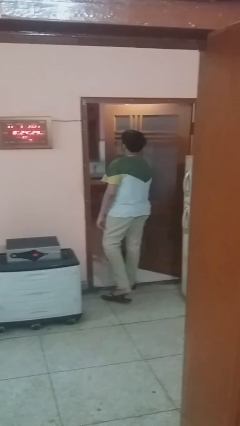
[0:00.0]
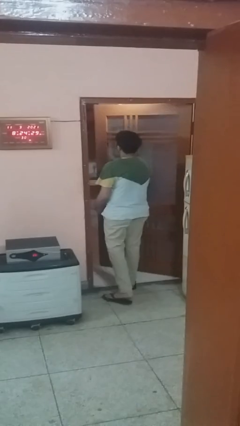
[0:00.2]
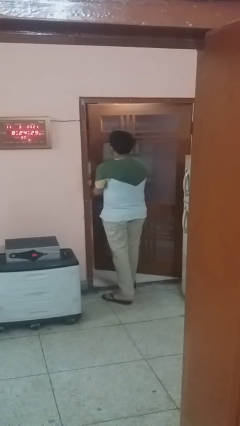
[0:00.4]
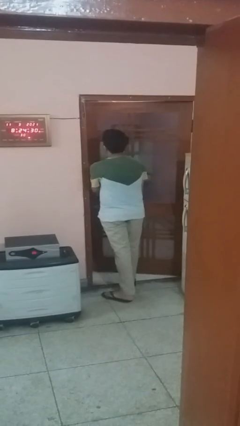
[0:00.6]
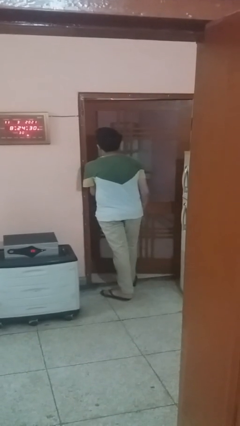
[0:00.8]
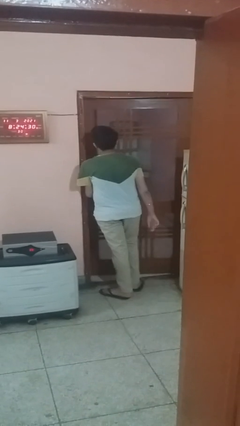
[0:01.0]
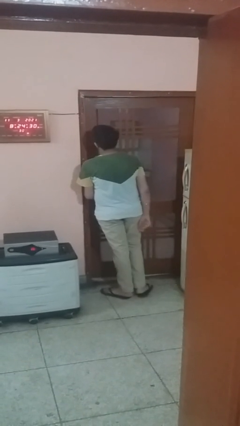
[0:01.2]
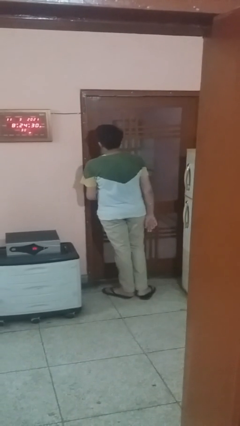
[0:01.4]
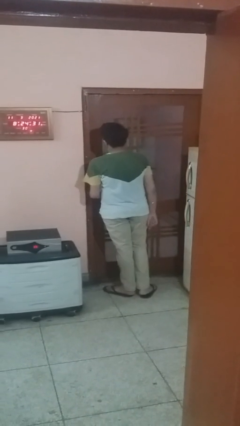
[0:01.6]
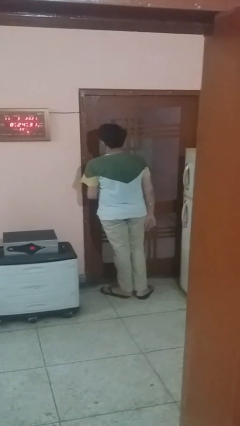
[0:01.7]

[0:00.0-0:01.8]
person closes facility door

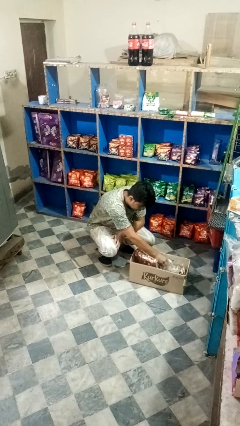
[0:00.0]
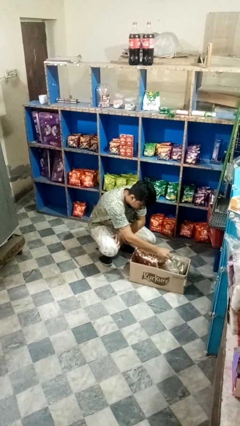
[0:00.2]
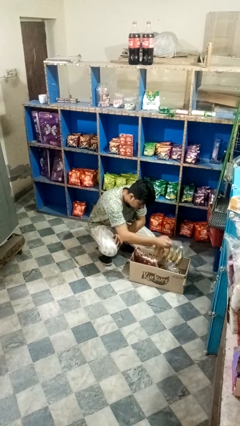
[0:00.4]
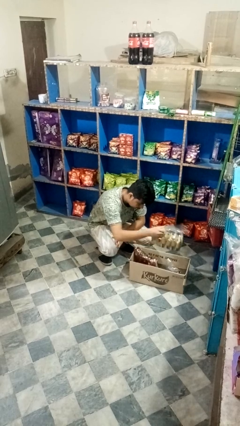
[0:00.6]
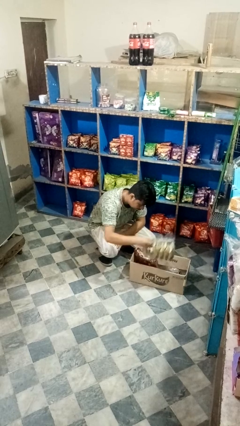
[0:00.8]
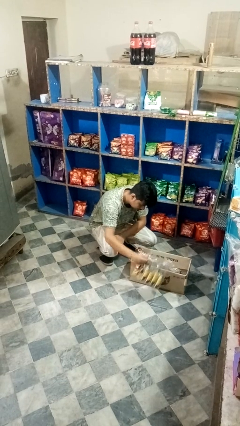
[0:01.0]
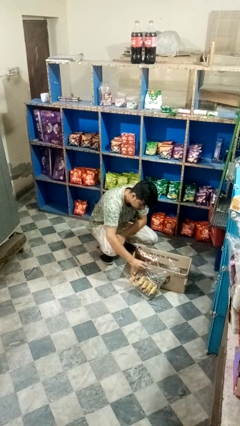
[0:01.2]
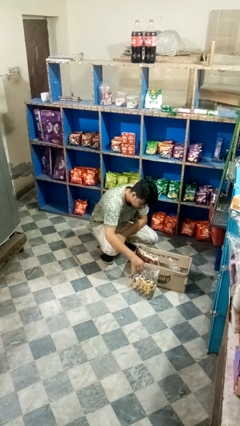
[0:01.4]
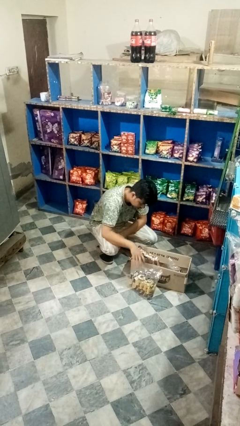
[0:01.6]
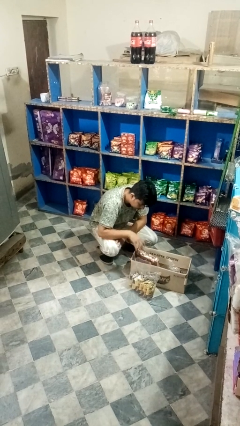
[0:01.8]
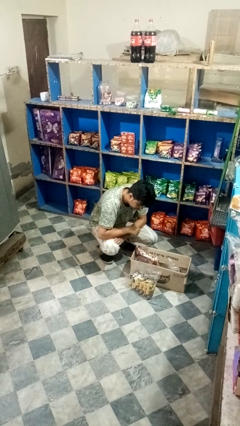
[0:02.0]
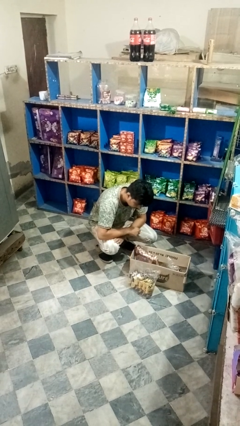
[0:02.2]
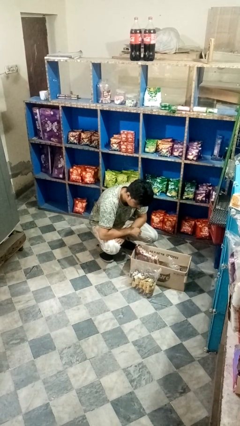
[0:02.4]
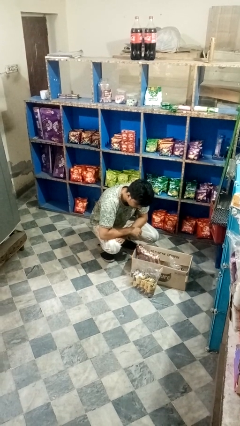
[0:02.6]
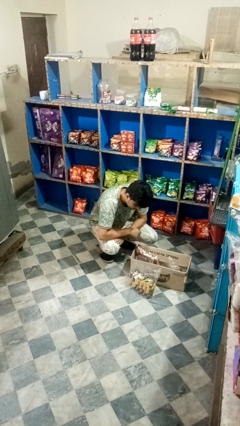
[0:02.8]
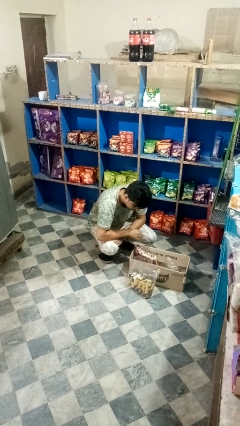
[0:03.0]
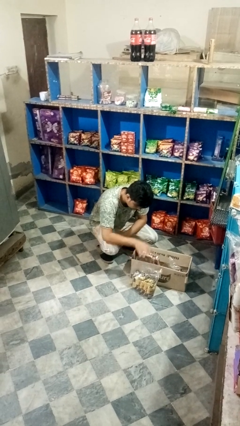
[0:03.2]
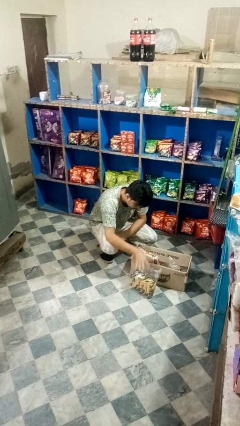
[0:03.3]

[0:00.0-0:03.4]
person takes object from box

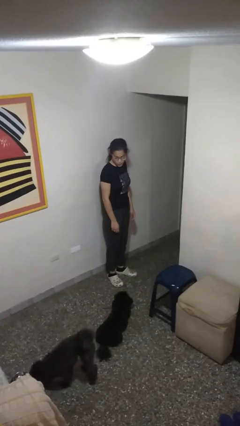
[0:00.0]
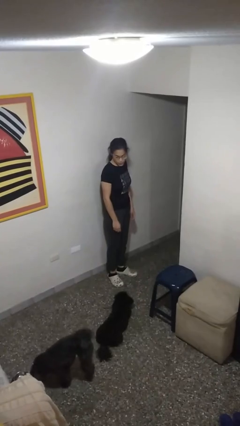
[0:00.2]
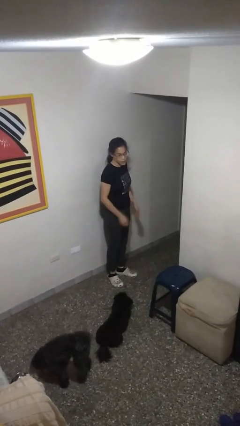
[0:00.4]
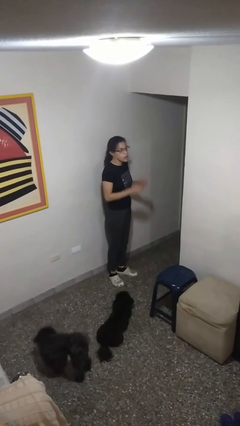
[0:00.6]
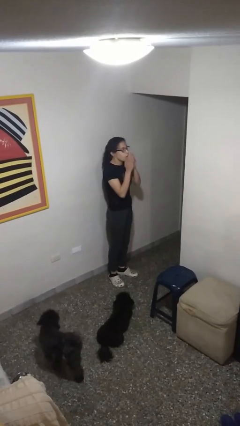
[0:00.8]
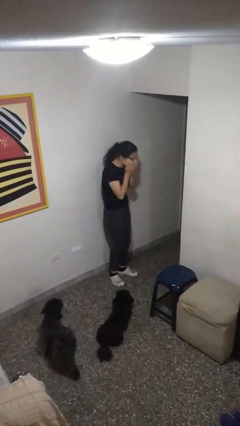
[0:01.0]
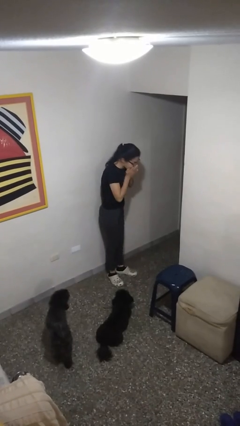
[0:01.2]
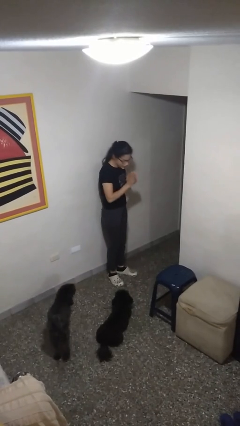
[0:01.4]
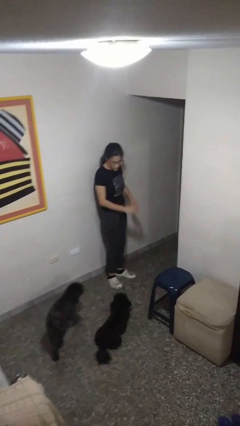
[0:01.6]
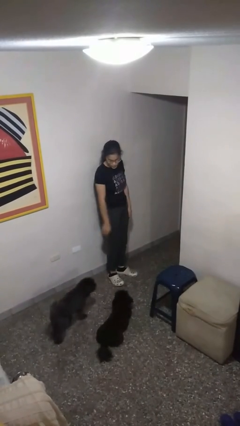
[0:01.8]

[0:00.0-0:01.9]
person sneezes into hand

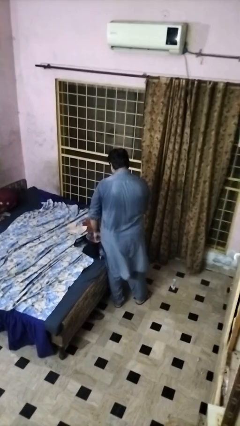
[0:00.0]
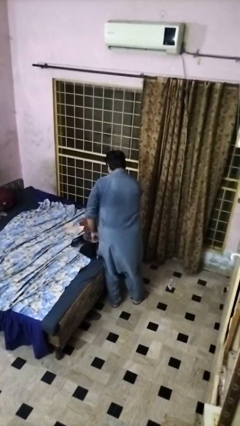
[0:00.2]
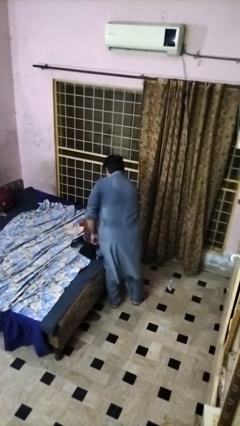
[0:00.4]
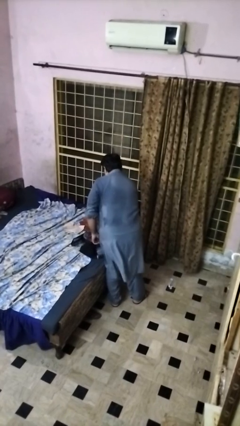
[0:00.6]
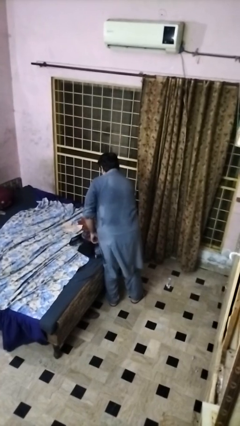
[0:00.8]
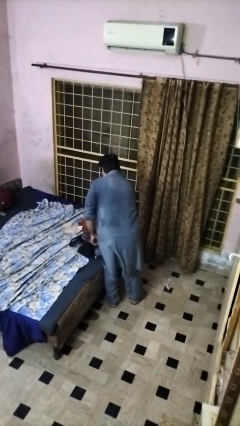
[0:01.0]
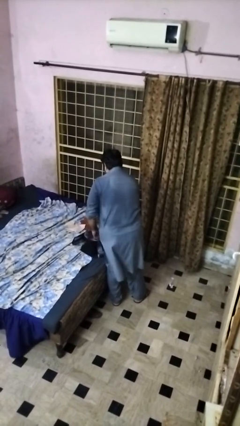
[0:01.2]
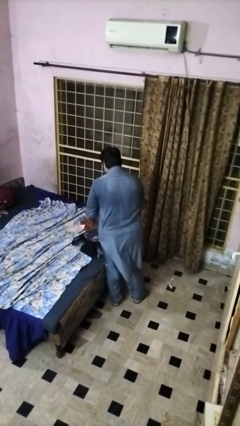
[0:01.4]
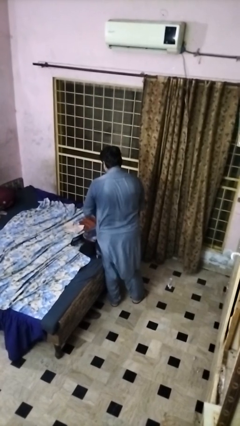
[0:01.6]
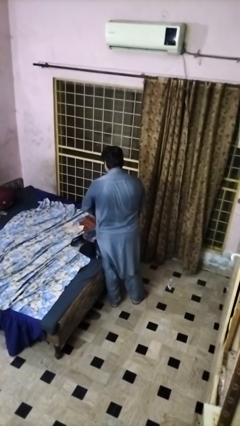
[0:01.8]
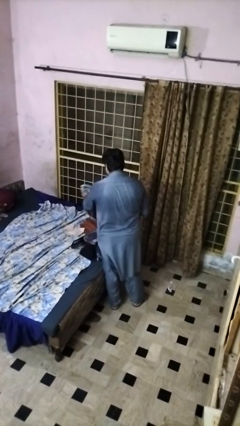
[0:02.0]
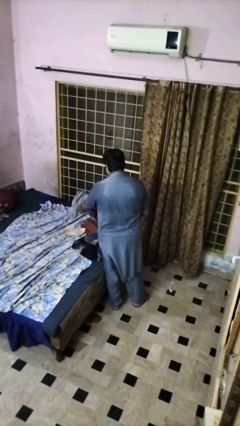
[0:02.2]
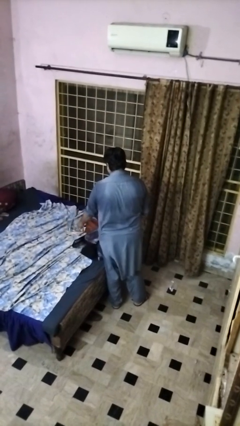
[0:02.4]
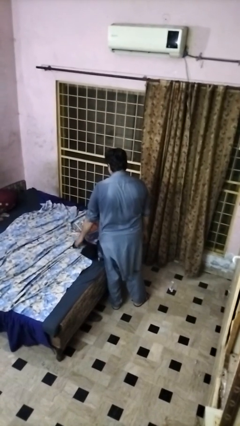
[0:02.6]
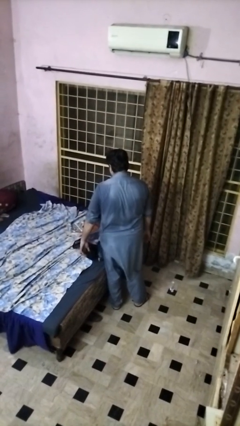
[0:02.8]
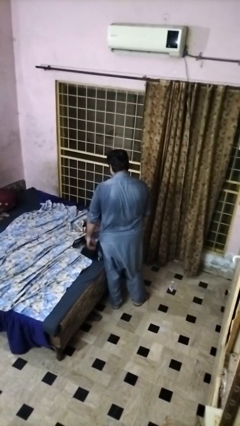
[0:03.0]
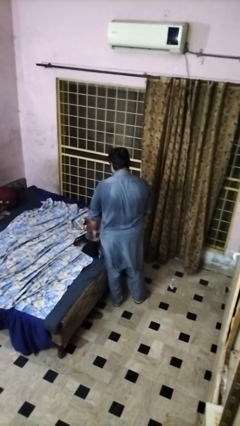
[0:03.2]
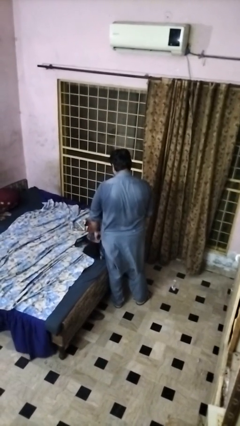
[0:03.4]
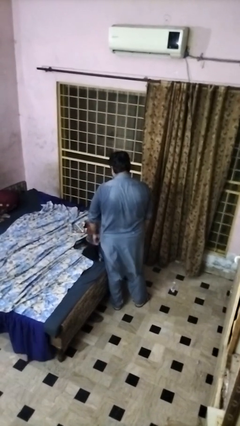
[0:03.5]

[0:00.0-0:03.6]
person unloads clothes from suitcase

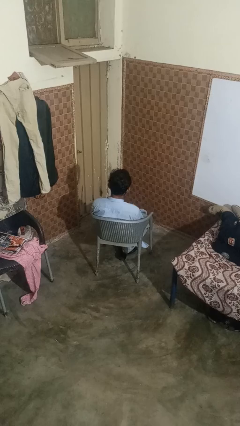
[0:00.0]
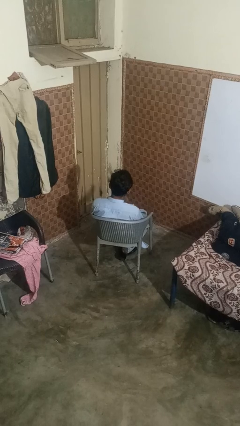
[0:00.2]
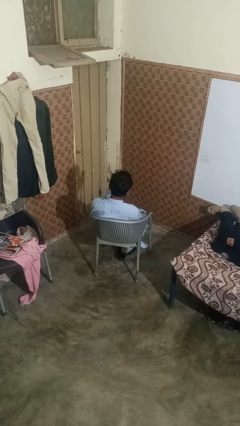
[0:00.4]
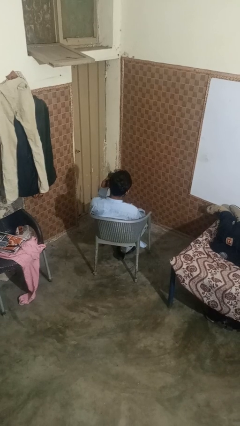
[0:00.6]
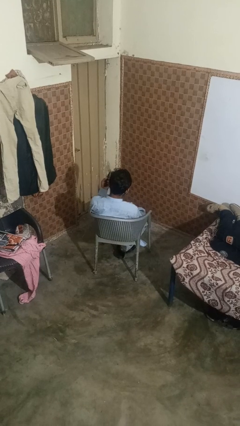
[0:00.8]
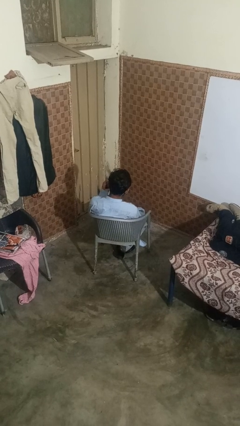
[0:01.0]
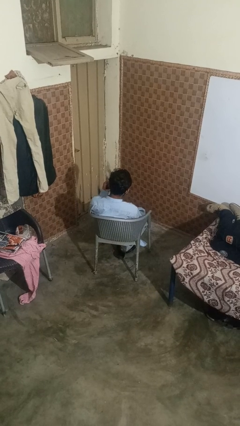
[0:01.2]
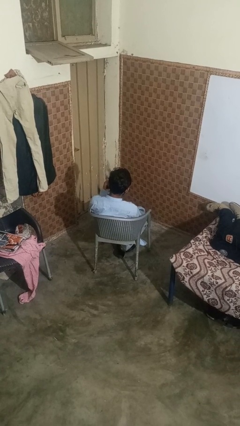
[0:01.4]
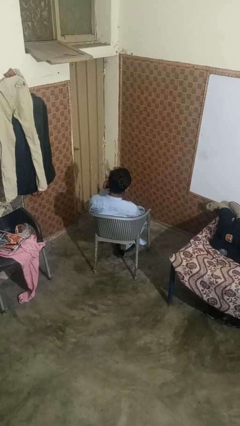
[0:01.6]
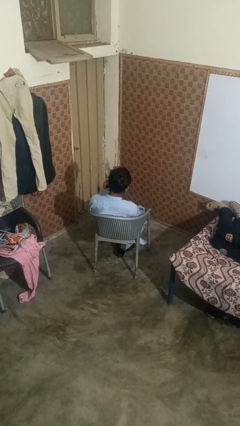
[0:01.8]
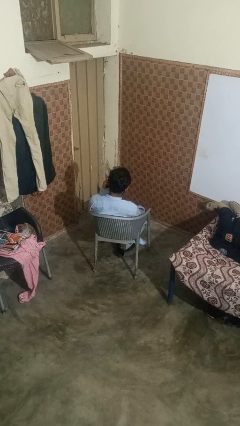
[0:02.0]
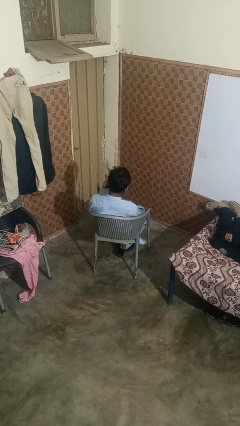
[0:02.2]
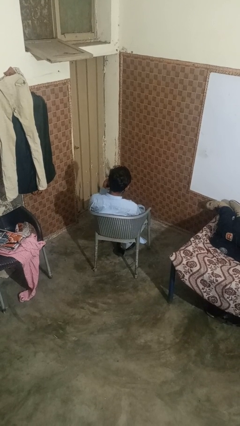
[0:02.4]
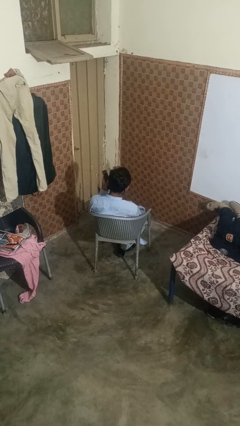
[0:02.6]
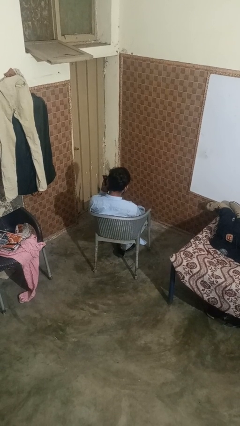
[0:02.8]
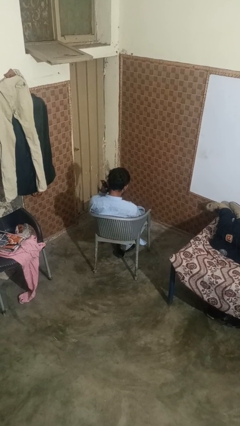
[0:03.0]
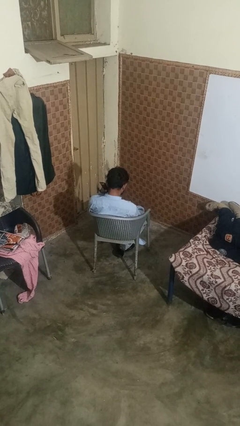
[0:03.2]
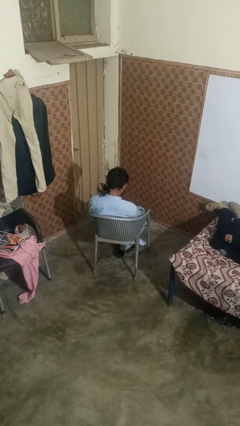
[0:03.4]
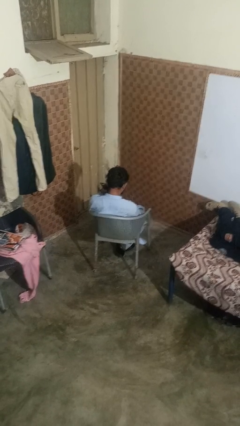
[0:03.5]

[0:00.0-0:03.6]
person uses television remote

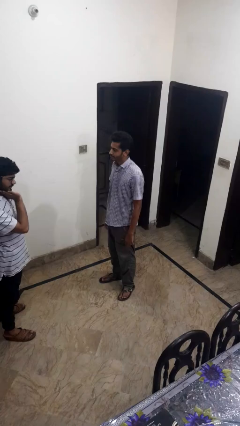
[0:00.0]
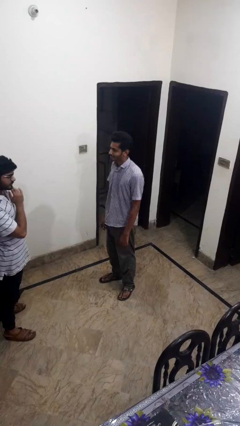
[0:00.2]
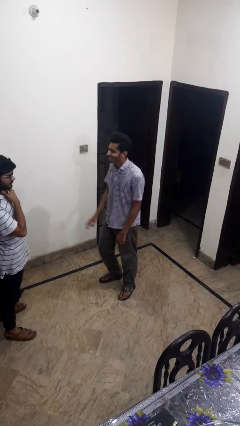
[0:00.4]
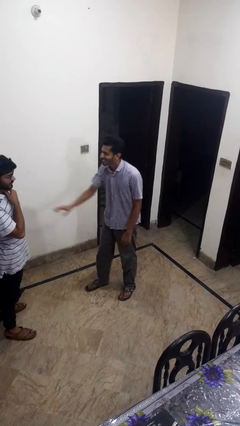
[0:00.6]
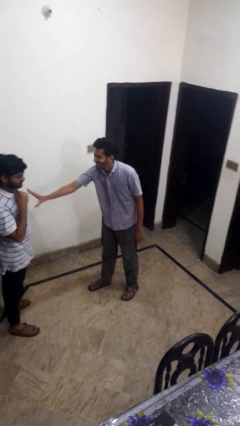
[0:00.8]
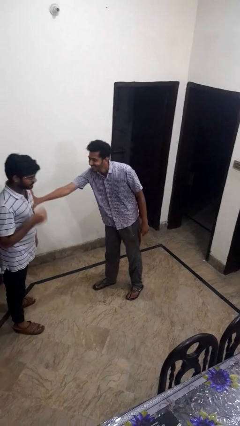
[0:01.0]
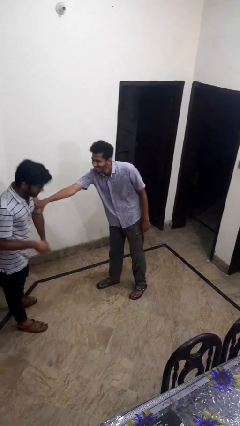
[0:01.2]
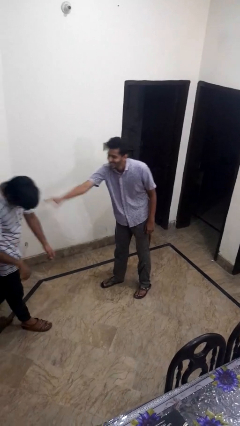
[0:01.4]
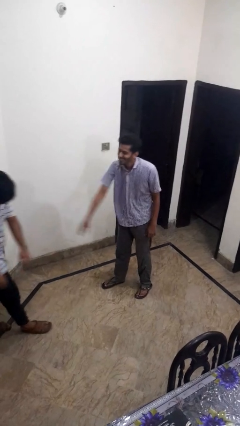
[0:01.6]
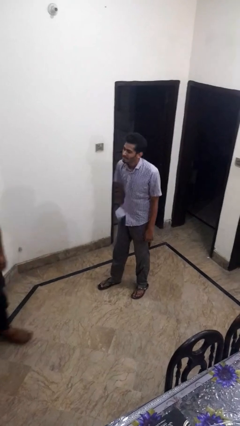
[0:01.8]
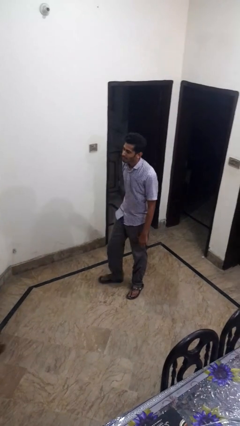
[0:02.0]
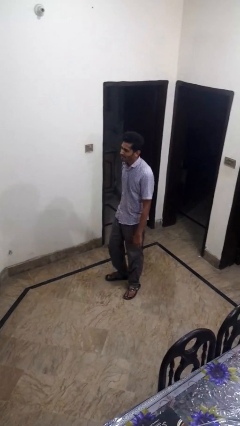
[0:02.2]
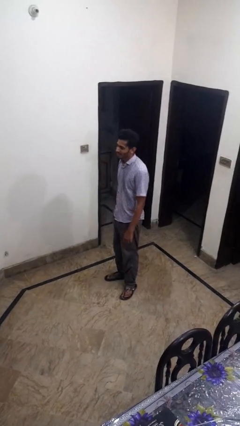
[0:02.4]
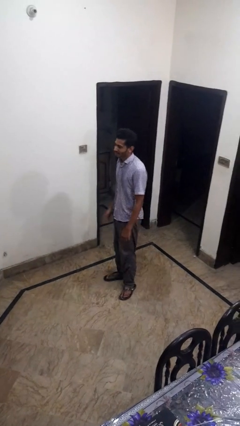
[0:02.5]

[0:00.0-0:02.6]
person shoves person

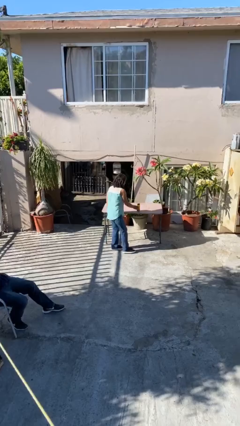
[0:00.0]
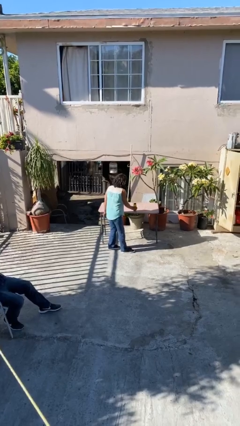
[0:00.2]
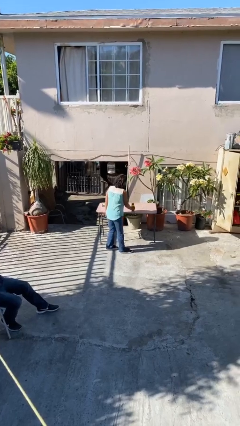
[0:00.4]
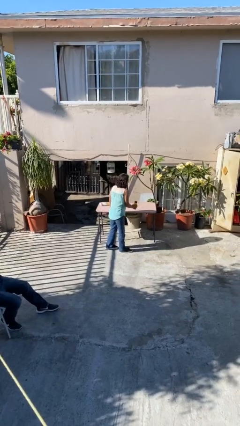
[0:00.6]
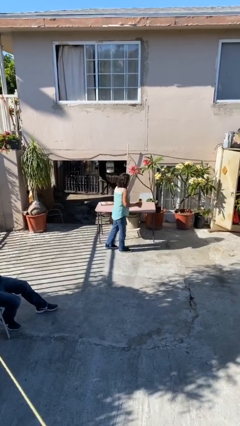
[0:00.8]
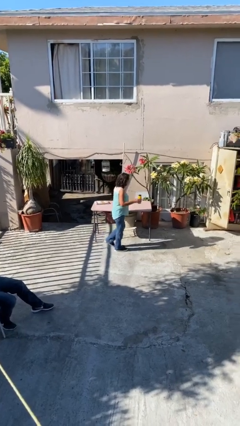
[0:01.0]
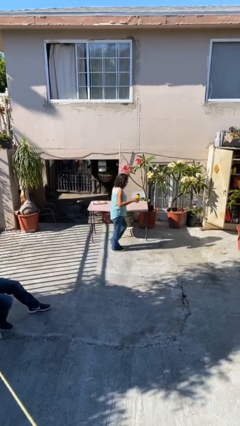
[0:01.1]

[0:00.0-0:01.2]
person picks up object from table
